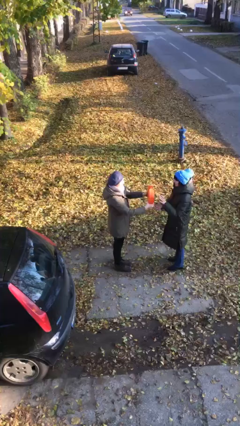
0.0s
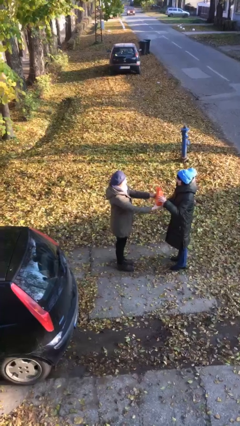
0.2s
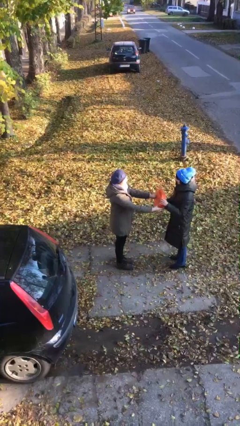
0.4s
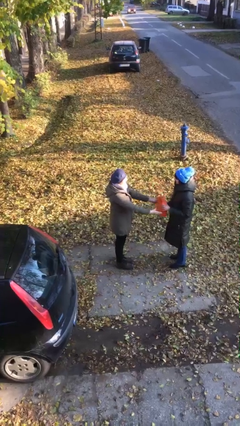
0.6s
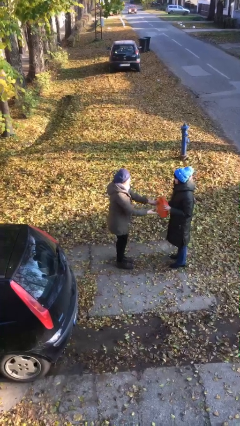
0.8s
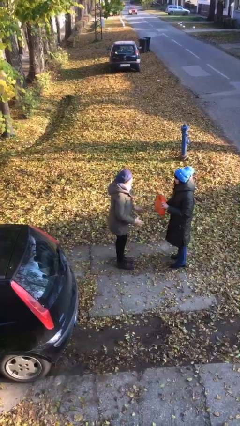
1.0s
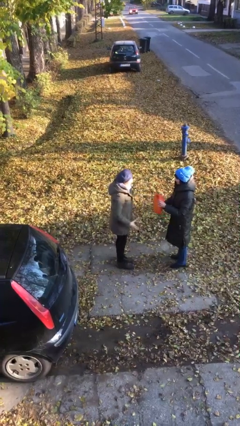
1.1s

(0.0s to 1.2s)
person transfers object to person

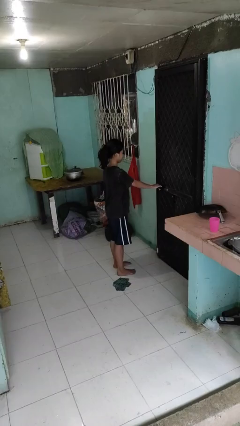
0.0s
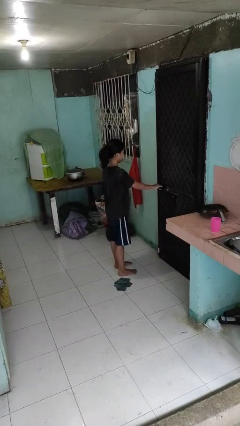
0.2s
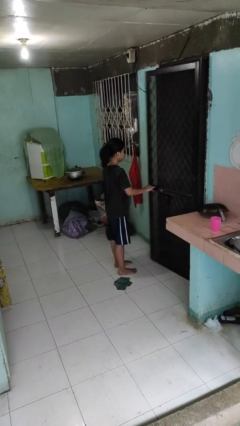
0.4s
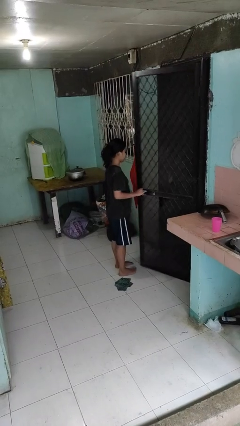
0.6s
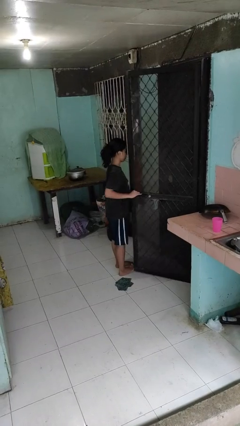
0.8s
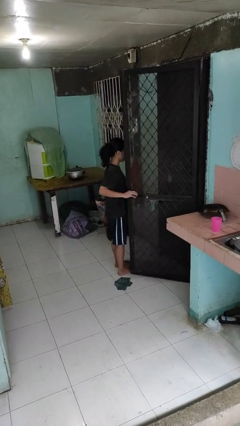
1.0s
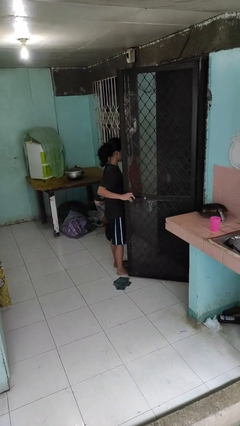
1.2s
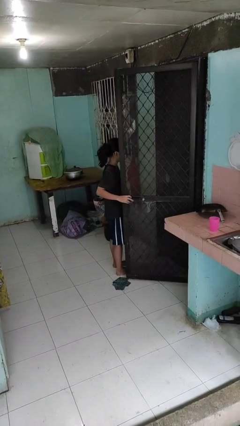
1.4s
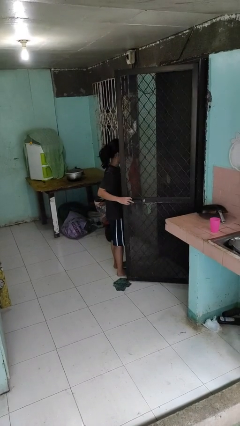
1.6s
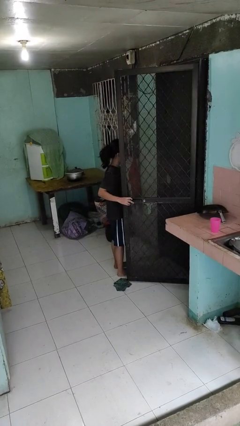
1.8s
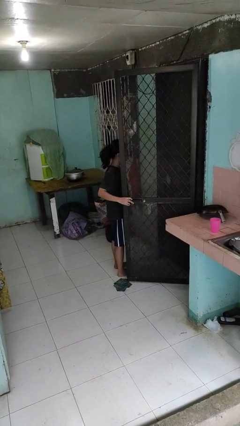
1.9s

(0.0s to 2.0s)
person opens facility door

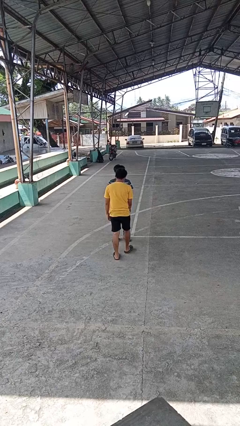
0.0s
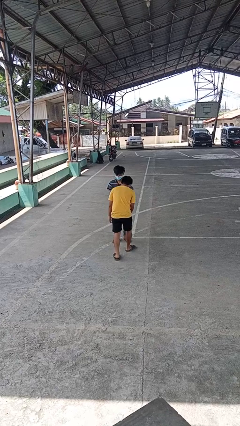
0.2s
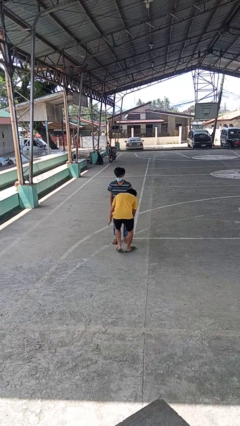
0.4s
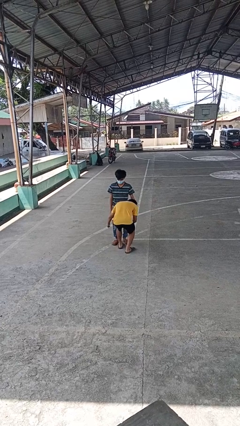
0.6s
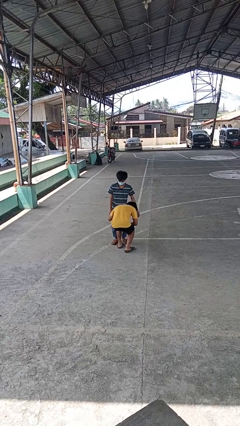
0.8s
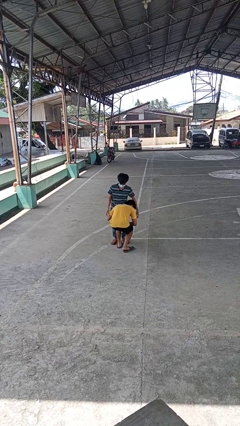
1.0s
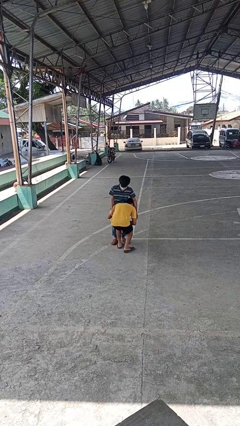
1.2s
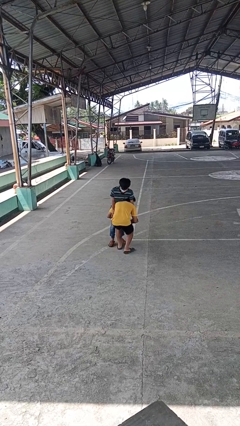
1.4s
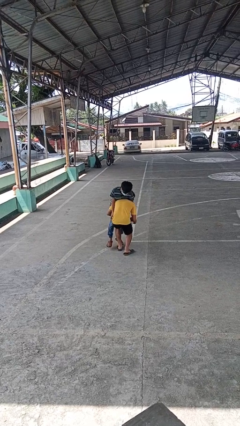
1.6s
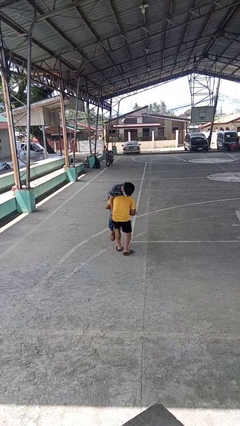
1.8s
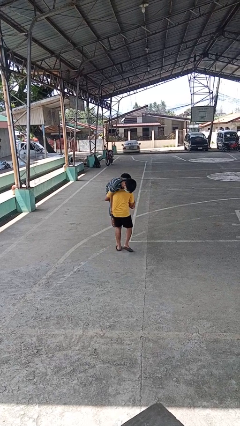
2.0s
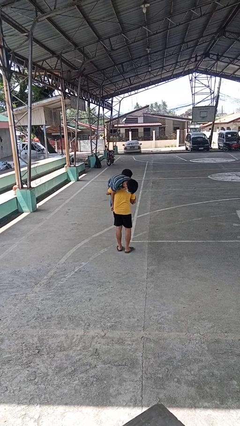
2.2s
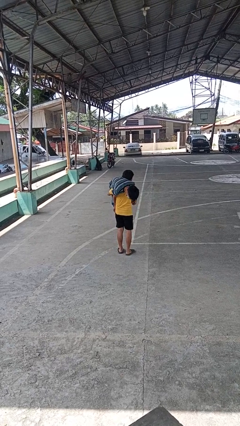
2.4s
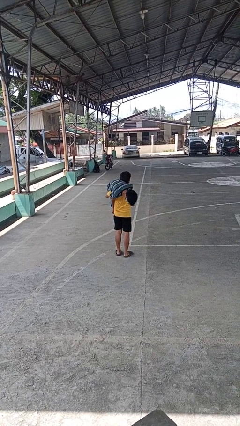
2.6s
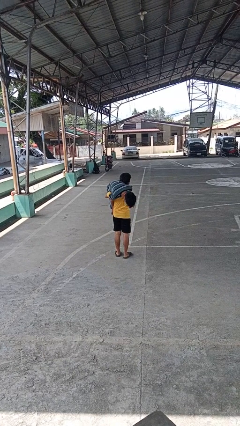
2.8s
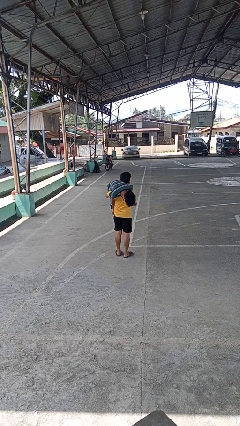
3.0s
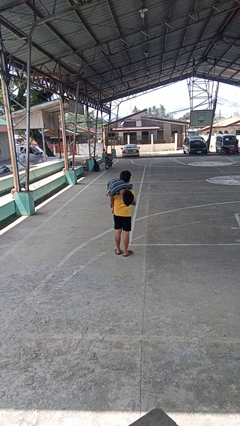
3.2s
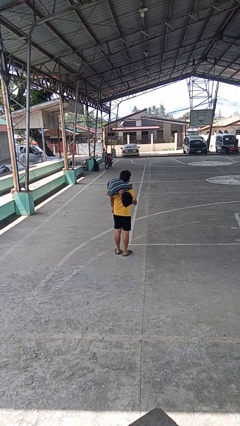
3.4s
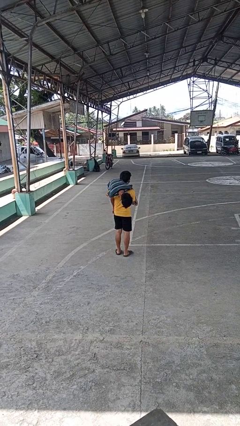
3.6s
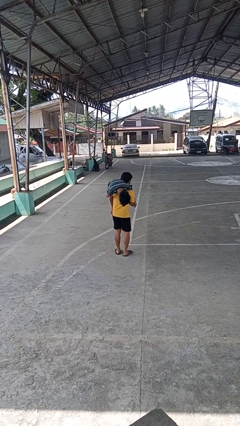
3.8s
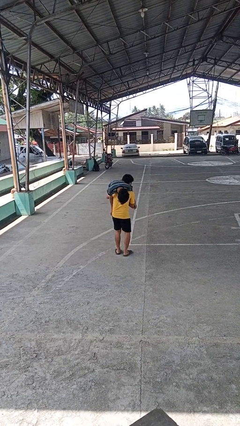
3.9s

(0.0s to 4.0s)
person carries person over shoulder

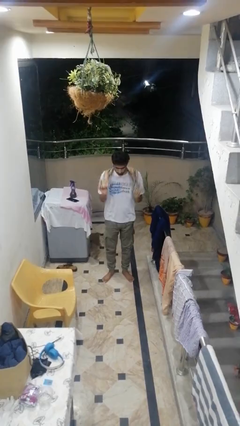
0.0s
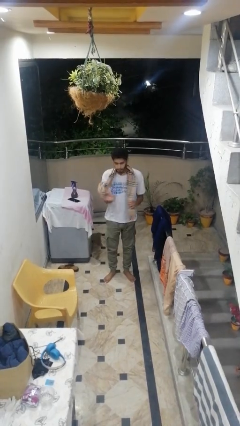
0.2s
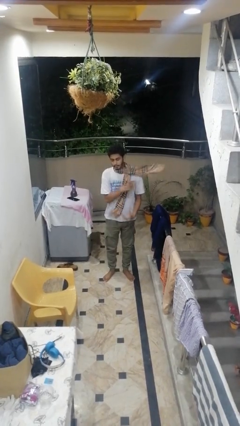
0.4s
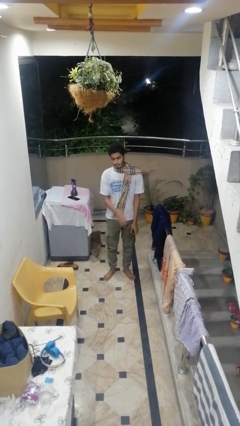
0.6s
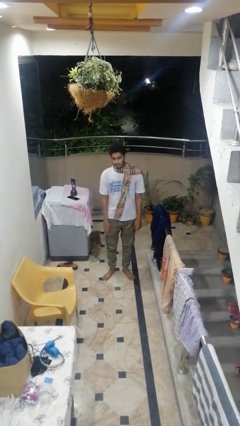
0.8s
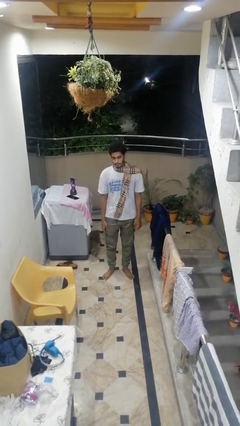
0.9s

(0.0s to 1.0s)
person puts on scarf

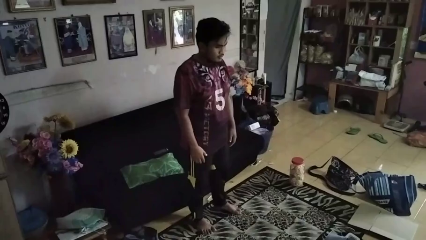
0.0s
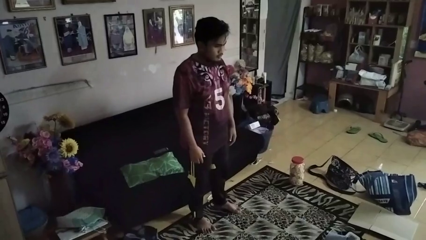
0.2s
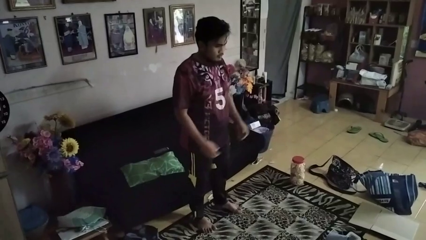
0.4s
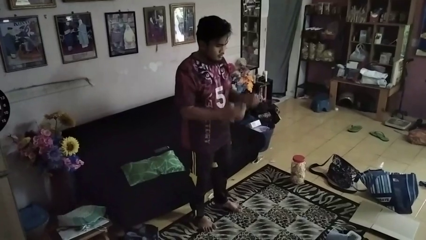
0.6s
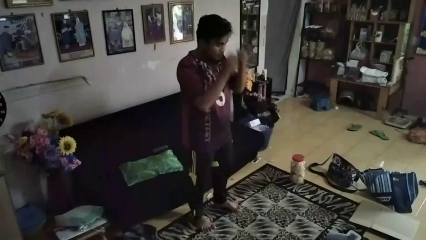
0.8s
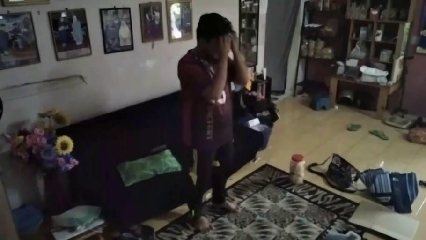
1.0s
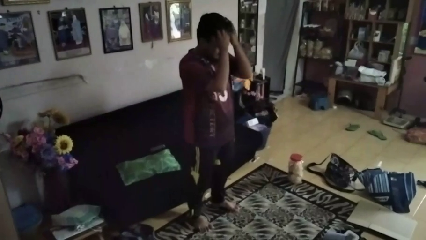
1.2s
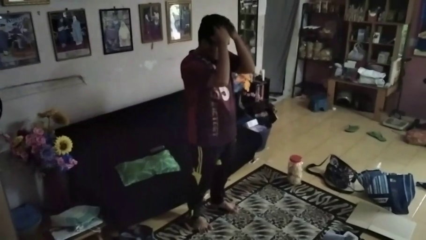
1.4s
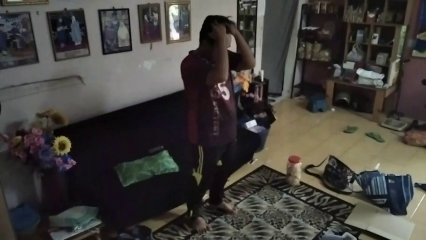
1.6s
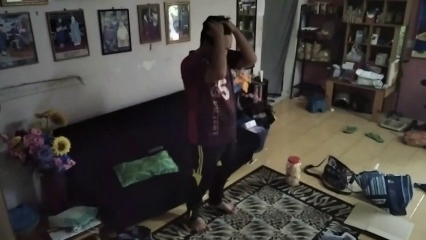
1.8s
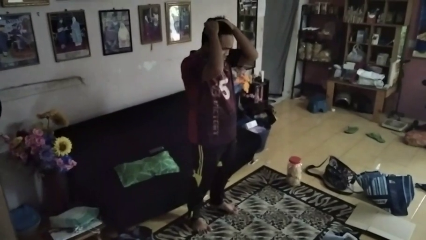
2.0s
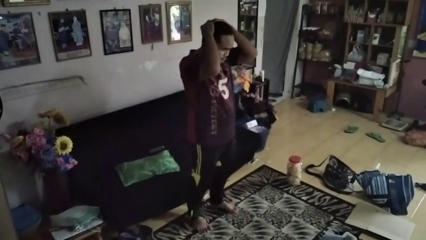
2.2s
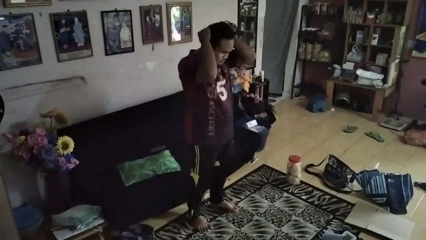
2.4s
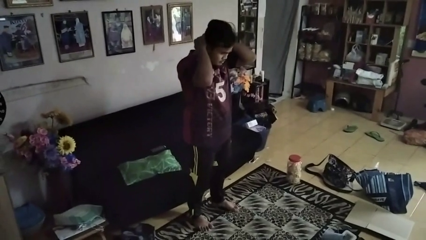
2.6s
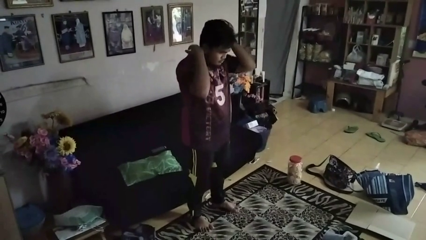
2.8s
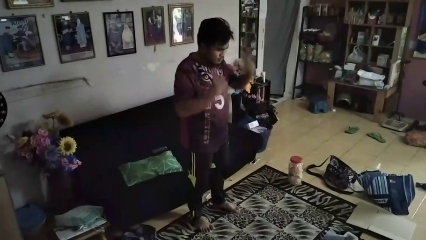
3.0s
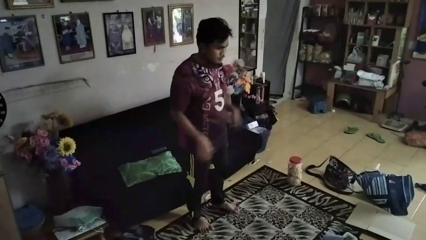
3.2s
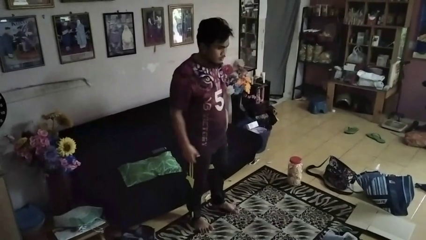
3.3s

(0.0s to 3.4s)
person strokes hair

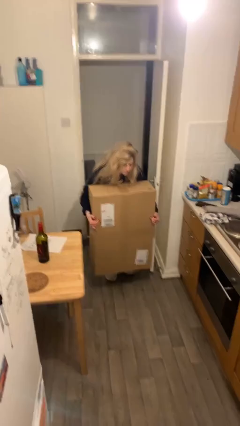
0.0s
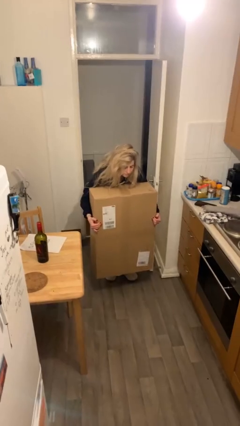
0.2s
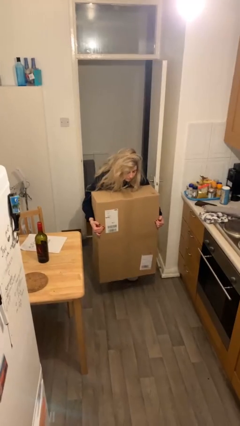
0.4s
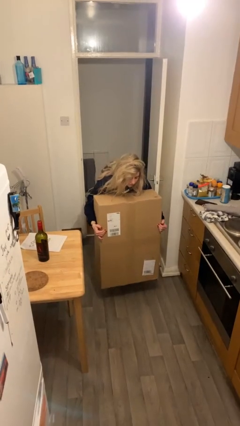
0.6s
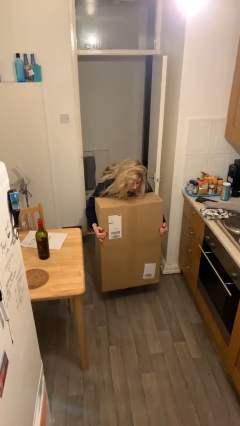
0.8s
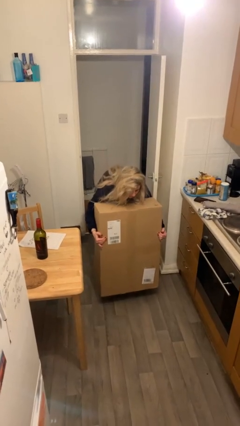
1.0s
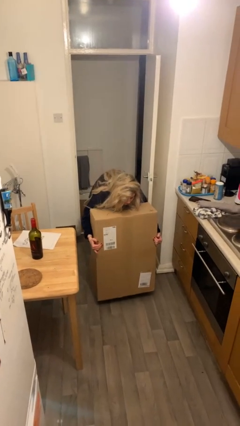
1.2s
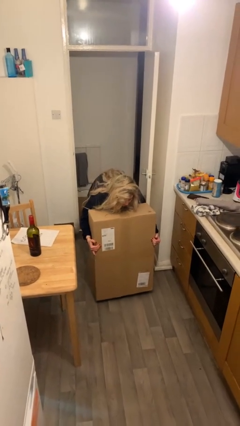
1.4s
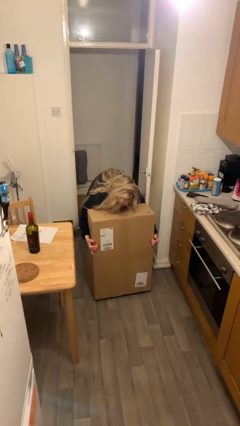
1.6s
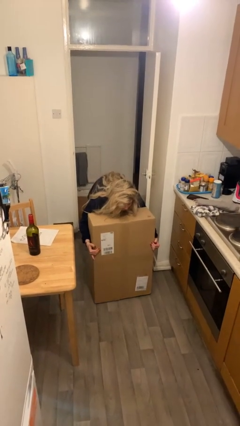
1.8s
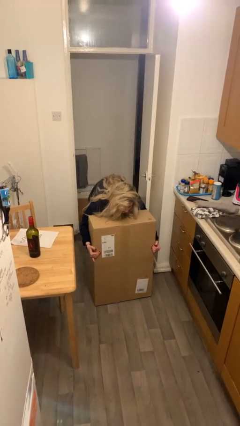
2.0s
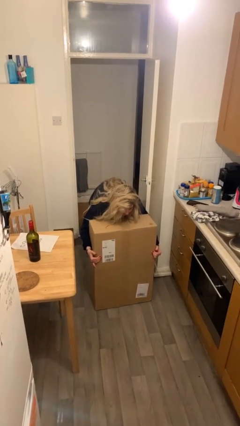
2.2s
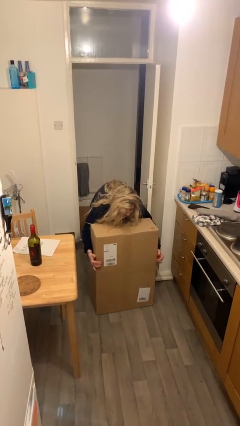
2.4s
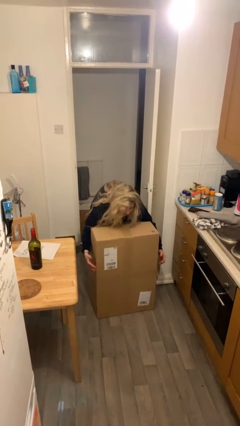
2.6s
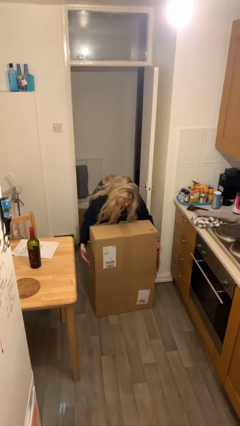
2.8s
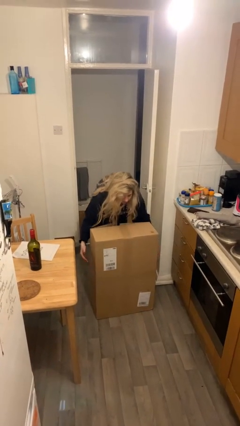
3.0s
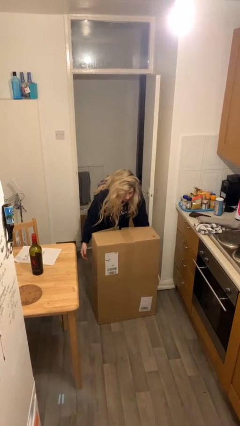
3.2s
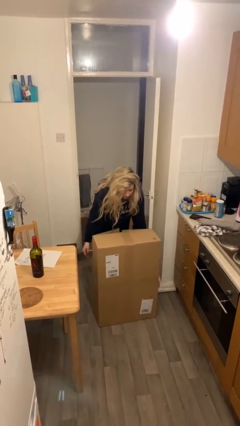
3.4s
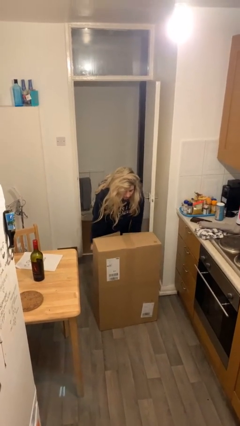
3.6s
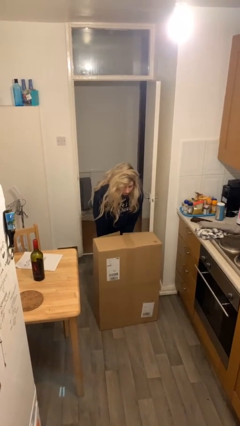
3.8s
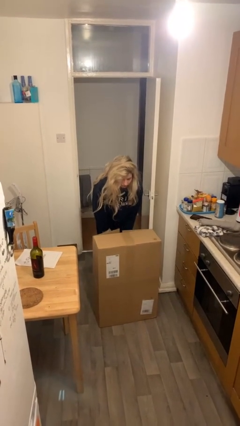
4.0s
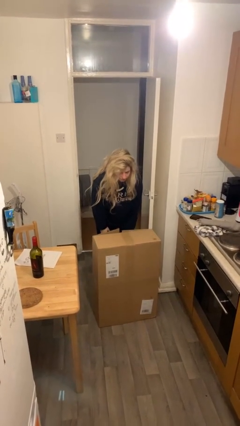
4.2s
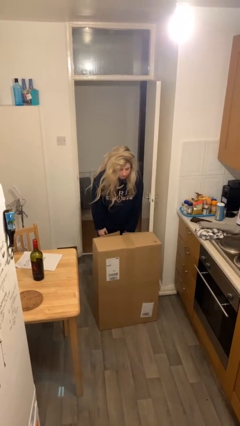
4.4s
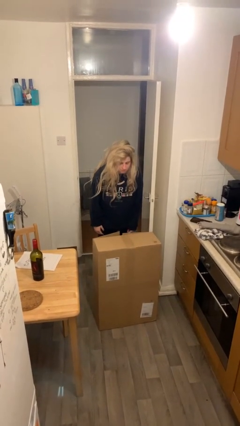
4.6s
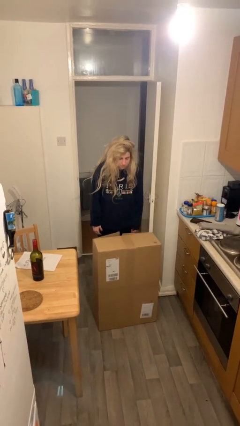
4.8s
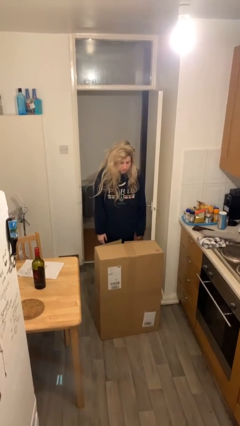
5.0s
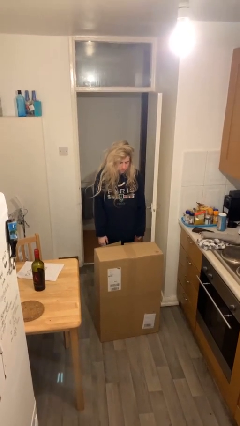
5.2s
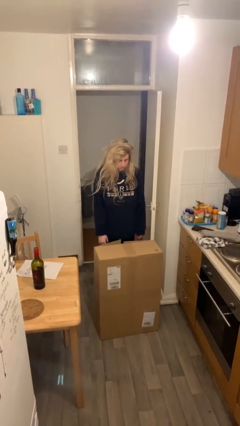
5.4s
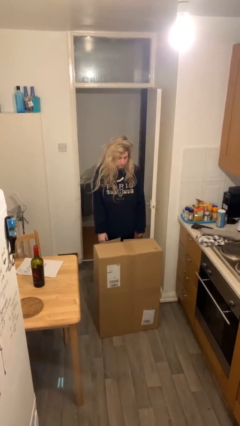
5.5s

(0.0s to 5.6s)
person puts down object on floor
